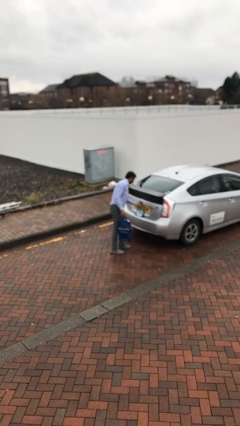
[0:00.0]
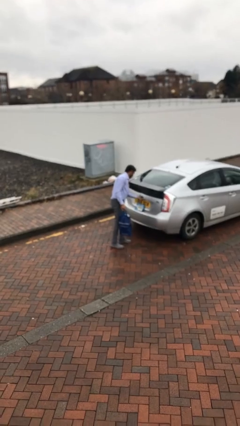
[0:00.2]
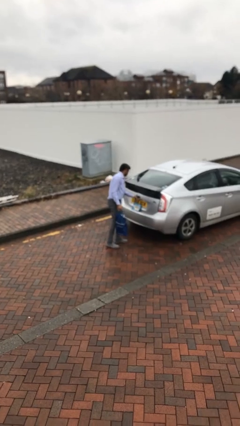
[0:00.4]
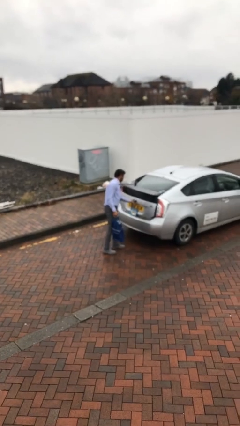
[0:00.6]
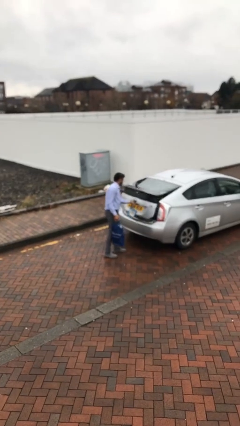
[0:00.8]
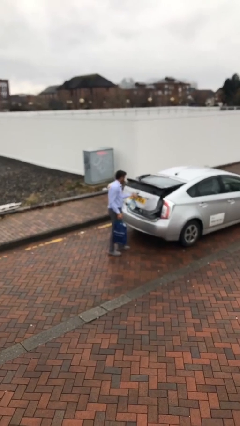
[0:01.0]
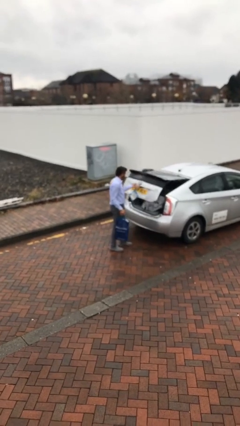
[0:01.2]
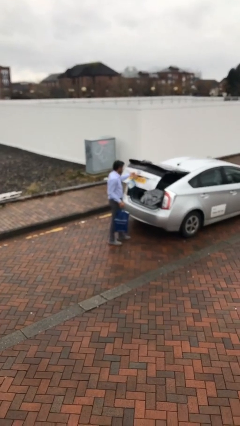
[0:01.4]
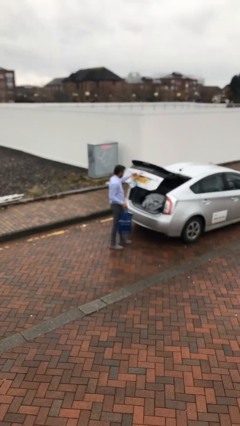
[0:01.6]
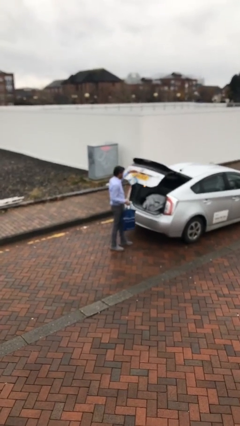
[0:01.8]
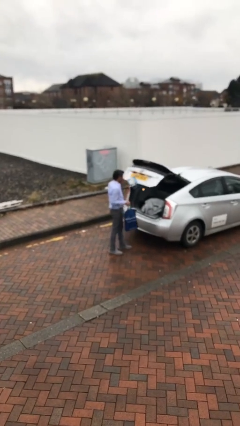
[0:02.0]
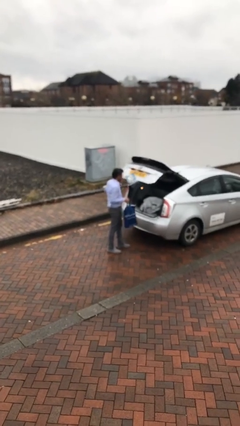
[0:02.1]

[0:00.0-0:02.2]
person opens car trunk

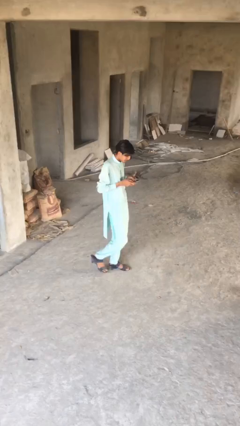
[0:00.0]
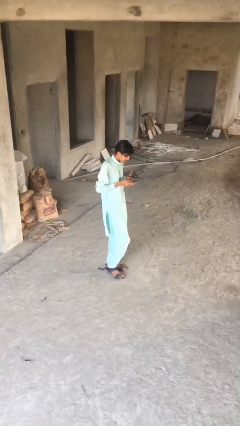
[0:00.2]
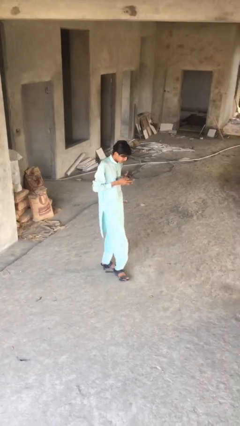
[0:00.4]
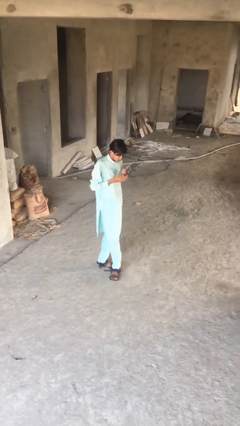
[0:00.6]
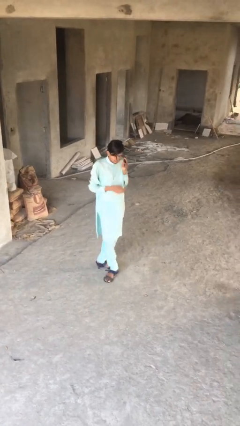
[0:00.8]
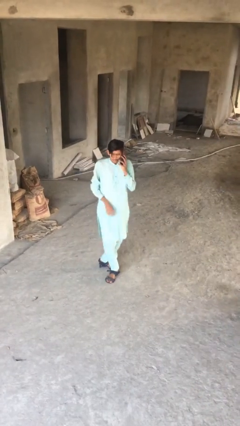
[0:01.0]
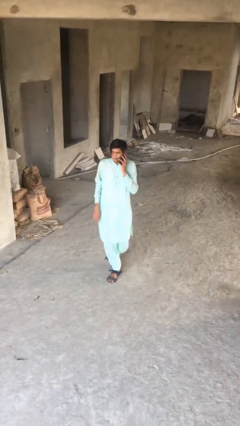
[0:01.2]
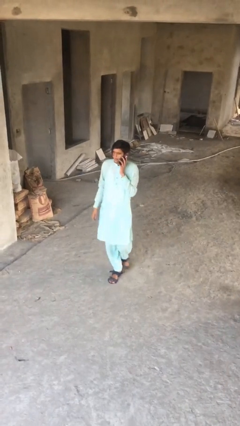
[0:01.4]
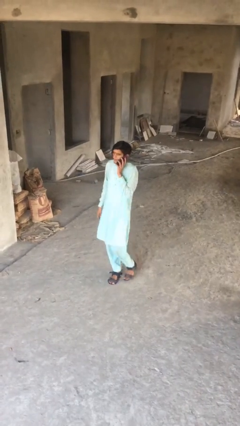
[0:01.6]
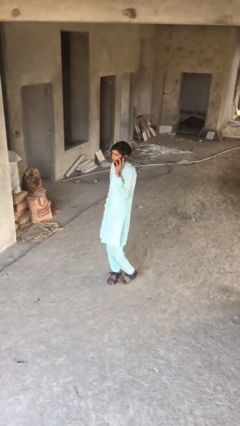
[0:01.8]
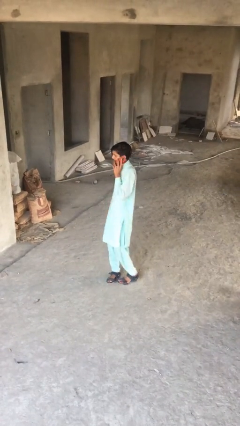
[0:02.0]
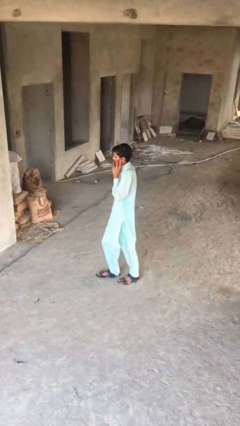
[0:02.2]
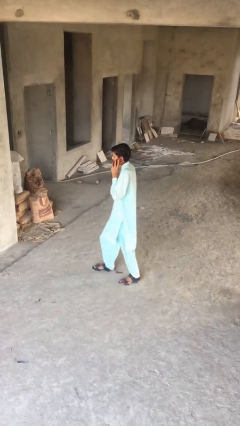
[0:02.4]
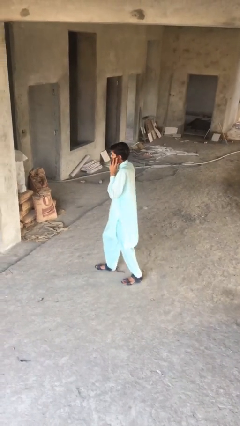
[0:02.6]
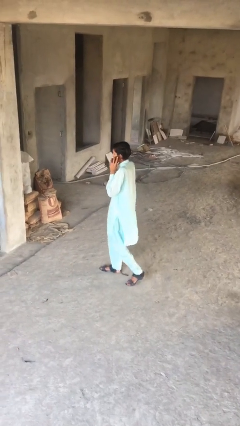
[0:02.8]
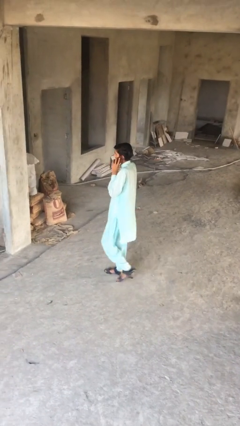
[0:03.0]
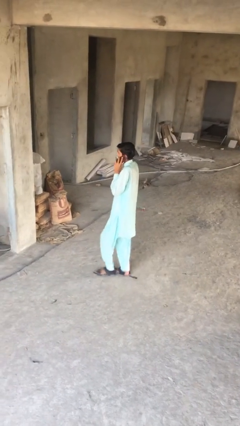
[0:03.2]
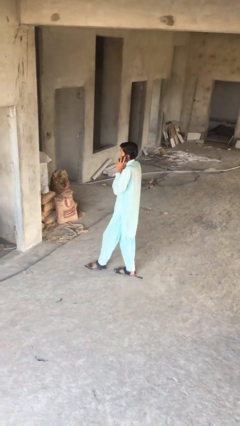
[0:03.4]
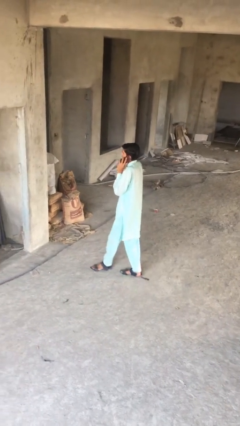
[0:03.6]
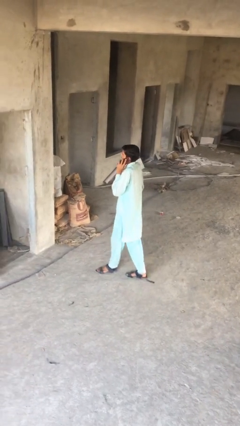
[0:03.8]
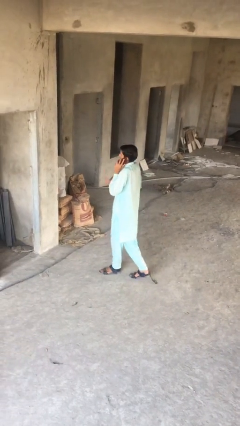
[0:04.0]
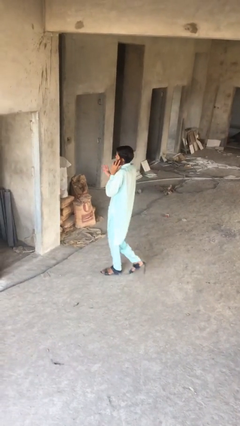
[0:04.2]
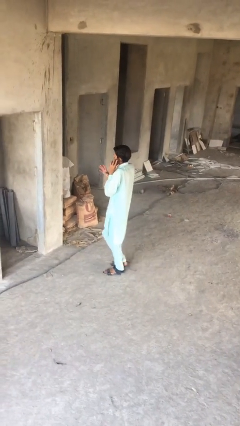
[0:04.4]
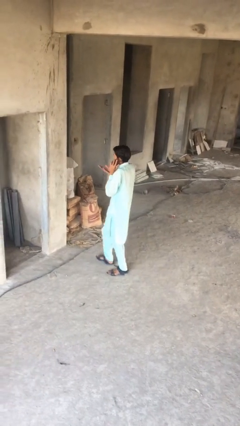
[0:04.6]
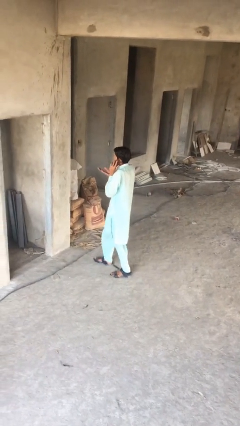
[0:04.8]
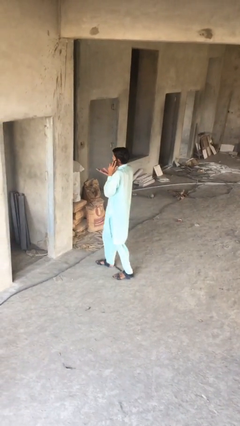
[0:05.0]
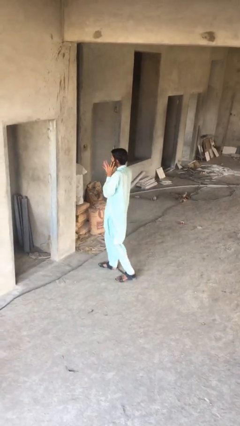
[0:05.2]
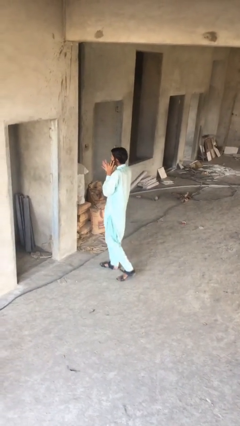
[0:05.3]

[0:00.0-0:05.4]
person talks on phone

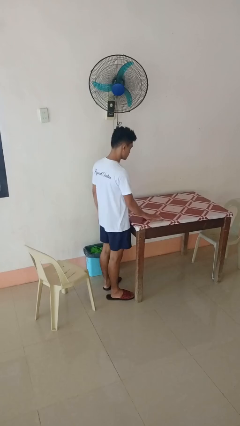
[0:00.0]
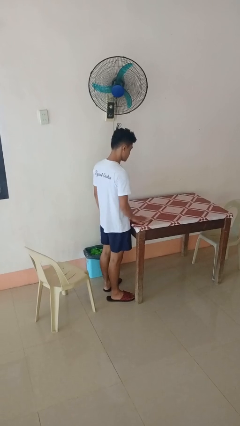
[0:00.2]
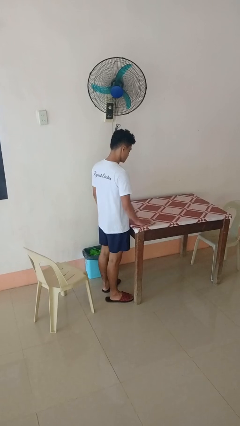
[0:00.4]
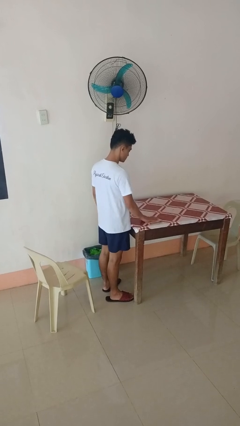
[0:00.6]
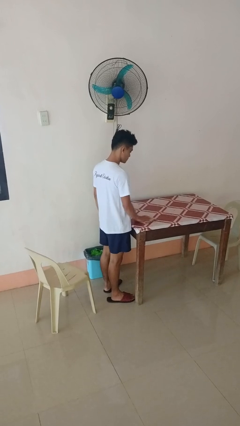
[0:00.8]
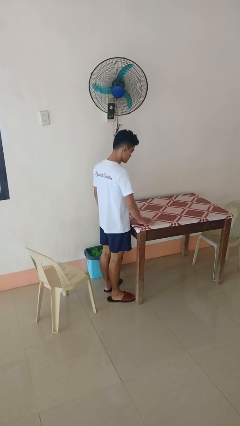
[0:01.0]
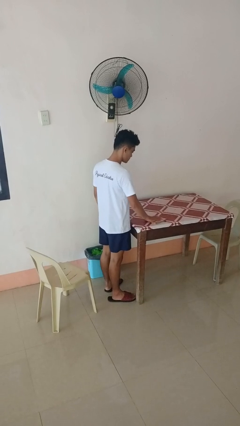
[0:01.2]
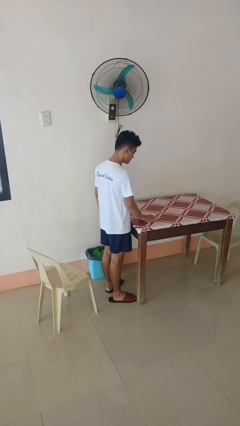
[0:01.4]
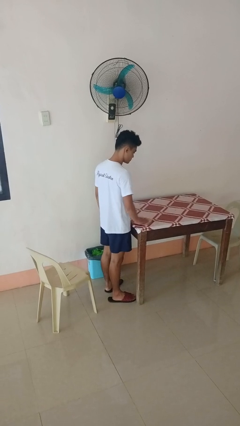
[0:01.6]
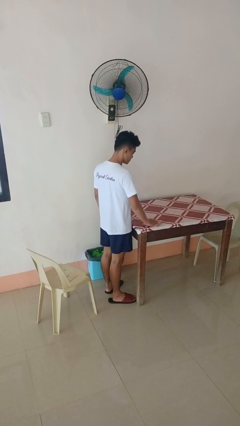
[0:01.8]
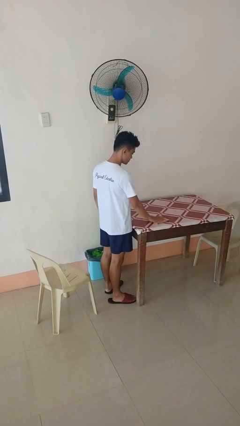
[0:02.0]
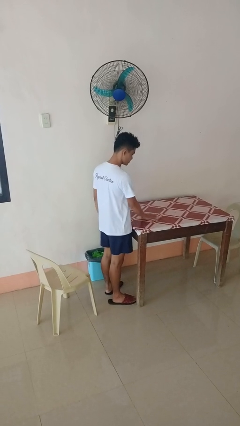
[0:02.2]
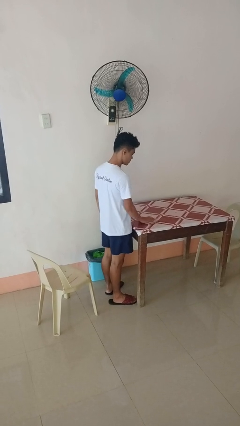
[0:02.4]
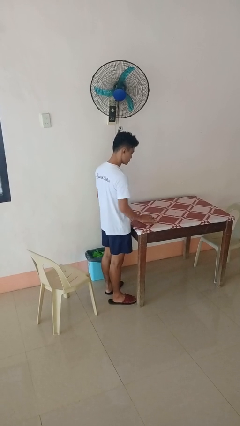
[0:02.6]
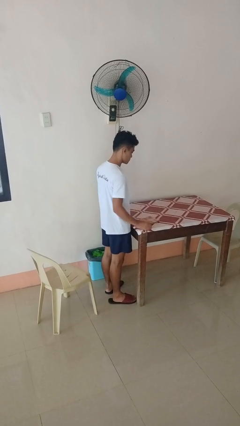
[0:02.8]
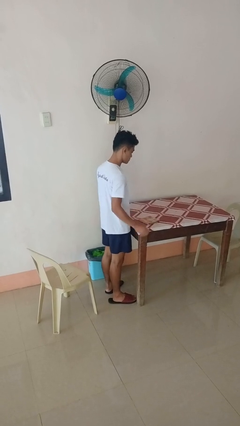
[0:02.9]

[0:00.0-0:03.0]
person cleans table with rag

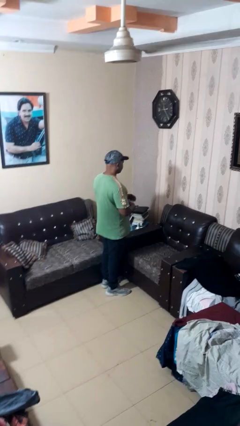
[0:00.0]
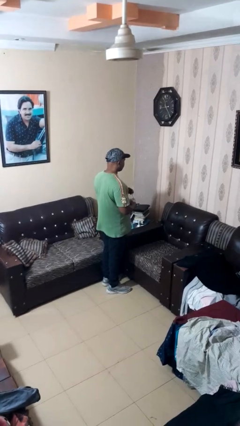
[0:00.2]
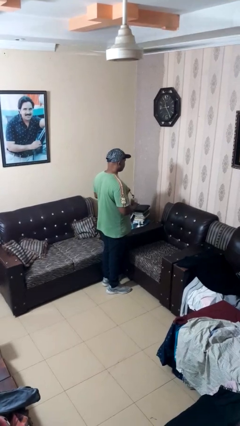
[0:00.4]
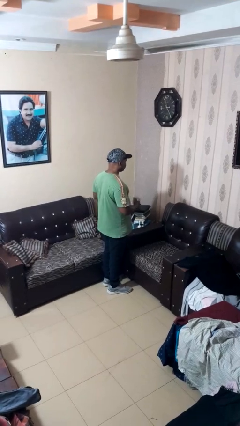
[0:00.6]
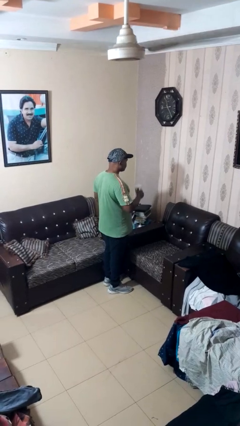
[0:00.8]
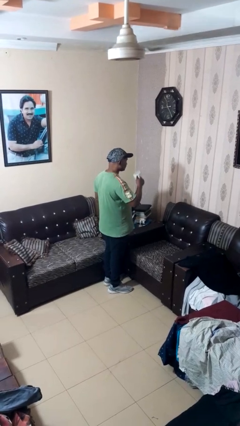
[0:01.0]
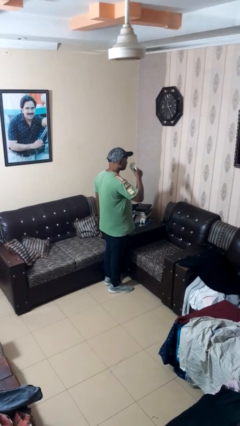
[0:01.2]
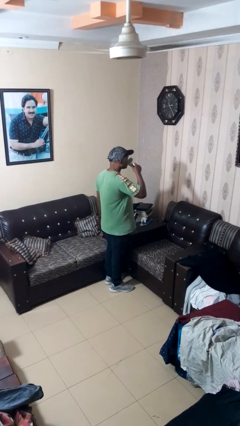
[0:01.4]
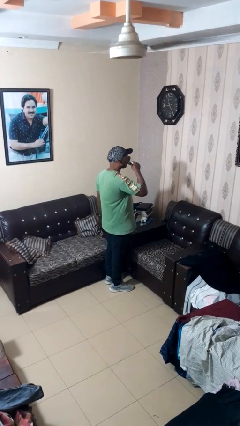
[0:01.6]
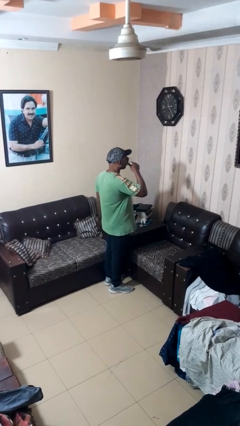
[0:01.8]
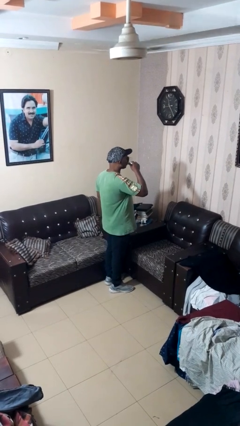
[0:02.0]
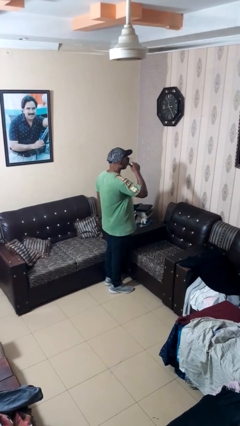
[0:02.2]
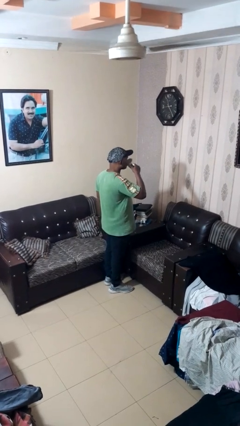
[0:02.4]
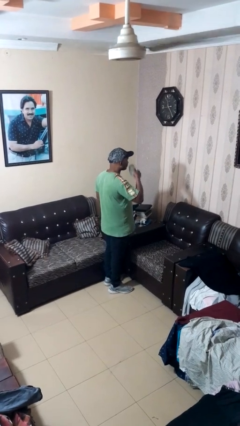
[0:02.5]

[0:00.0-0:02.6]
person drinks from mug

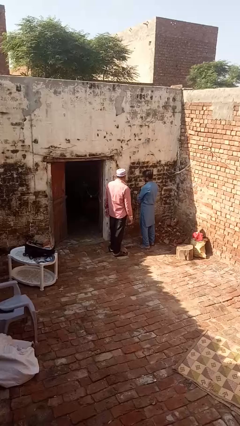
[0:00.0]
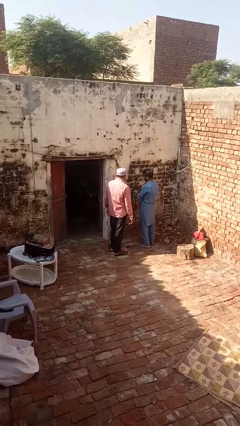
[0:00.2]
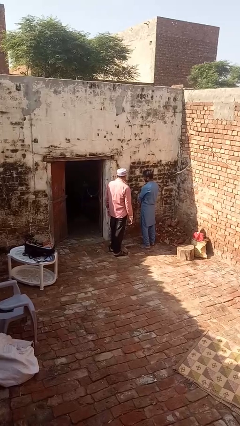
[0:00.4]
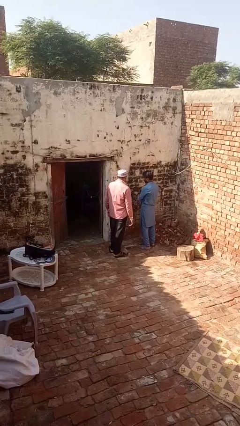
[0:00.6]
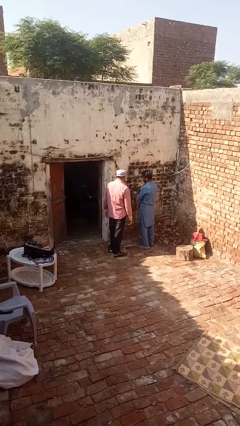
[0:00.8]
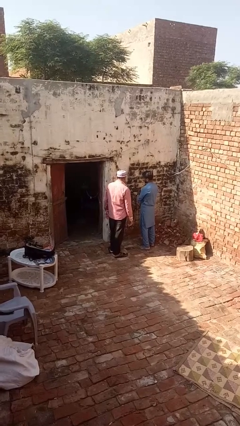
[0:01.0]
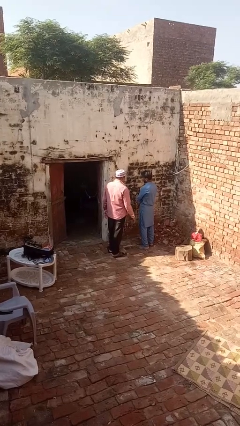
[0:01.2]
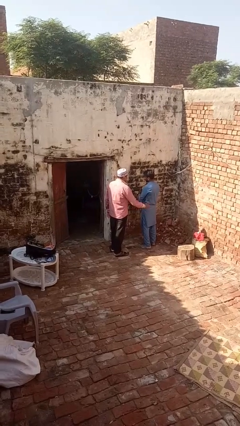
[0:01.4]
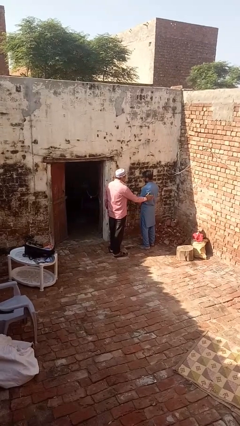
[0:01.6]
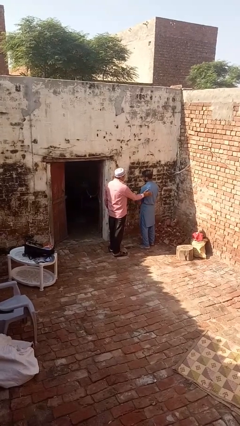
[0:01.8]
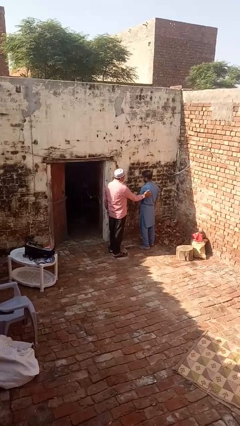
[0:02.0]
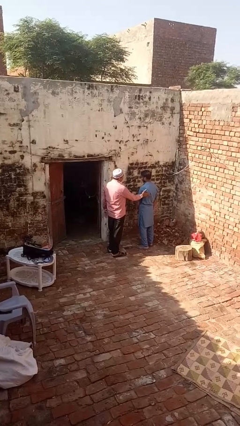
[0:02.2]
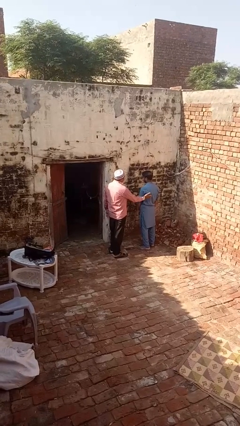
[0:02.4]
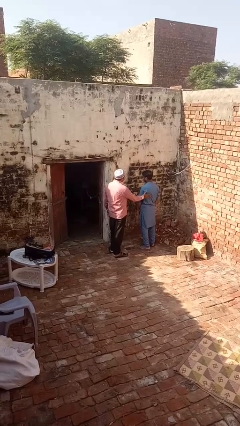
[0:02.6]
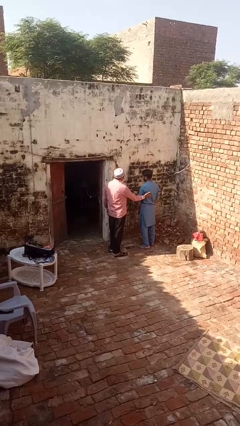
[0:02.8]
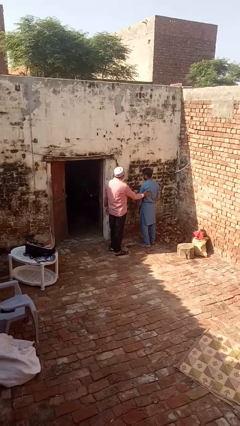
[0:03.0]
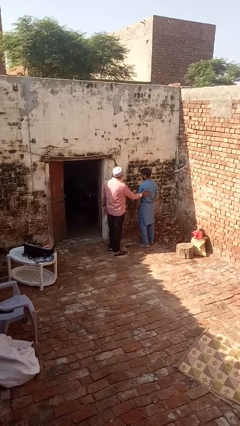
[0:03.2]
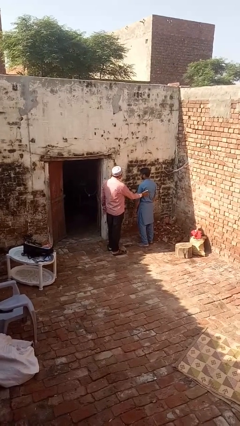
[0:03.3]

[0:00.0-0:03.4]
person shoves person

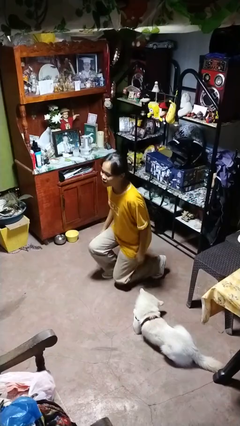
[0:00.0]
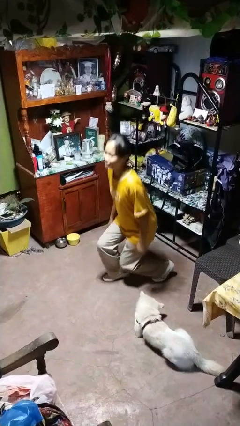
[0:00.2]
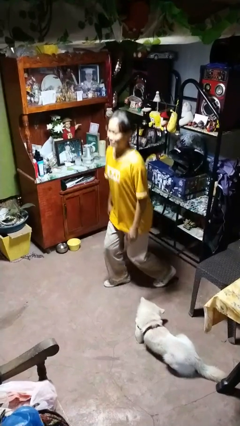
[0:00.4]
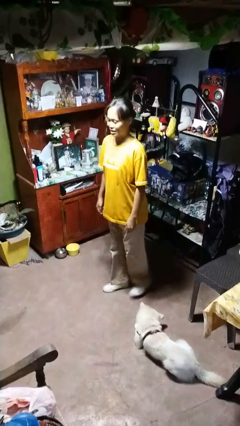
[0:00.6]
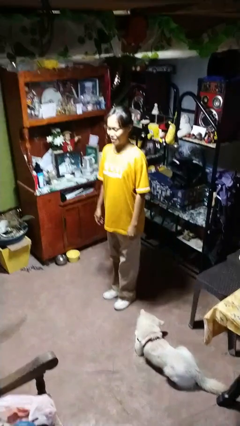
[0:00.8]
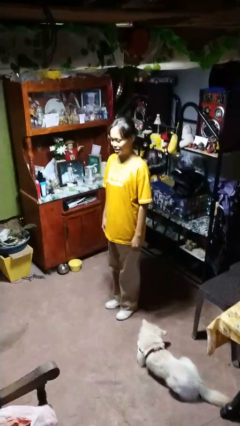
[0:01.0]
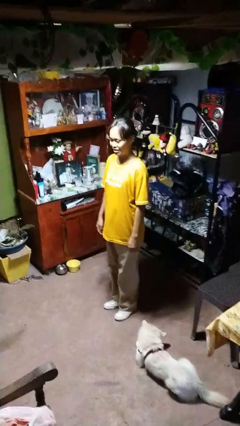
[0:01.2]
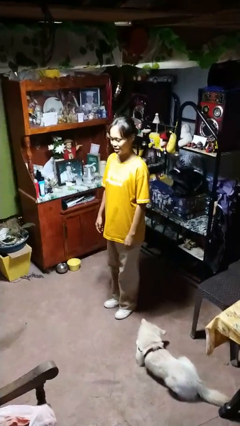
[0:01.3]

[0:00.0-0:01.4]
person stands up from floor
